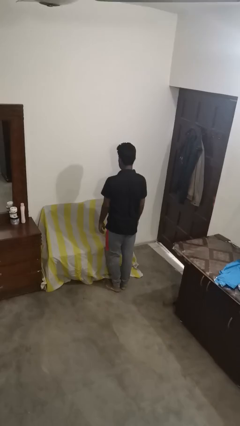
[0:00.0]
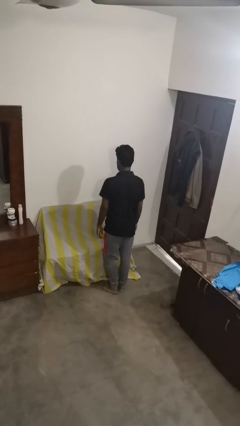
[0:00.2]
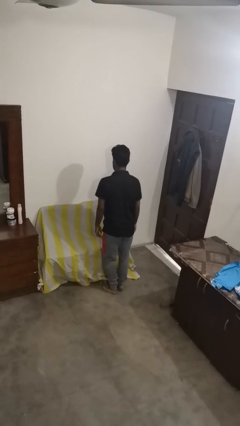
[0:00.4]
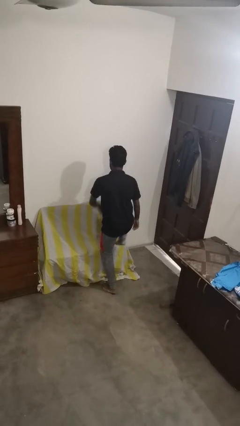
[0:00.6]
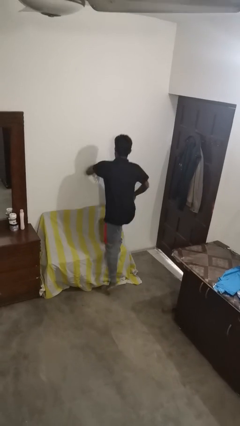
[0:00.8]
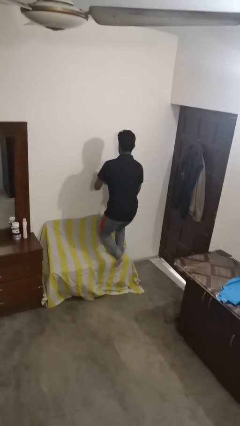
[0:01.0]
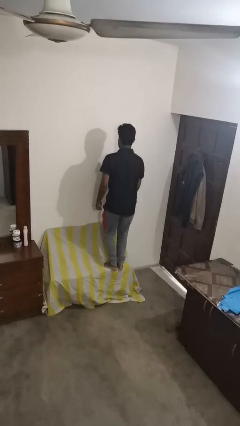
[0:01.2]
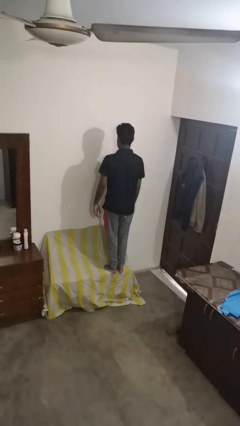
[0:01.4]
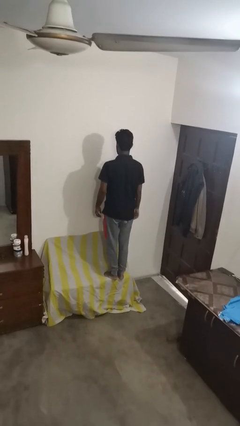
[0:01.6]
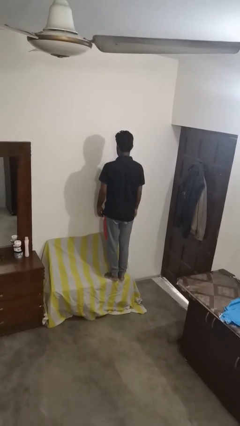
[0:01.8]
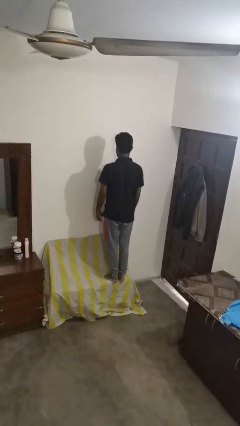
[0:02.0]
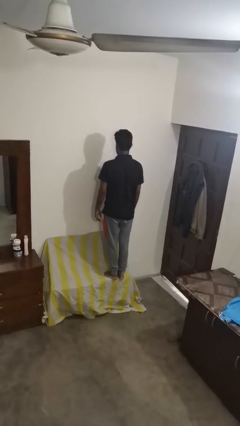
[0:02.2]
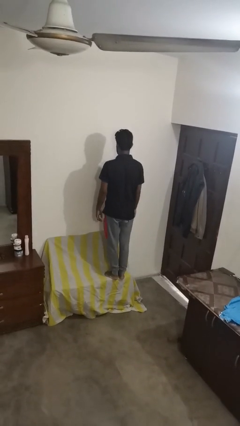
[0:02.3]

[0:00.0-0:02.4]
person jumps on couch

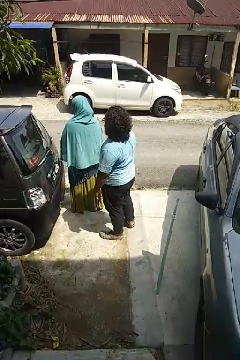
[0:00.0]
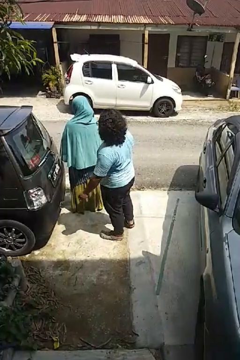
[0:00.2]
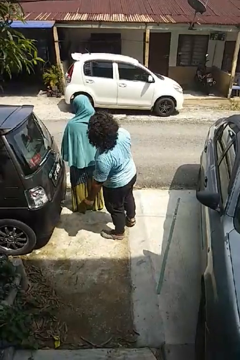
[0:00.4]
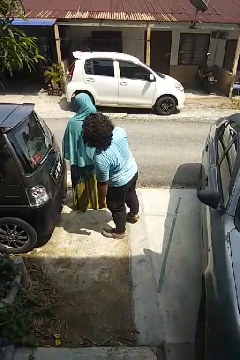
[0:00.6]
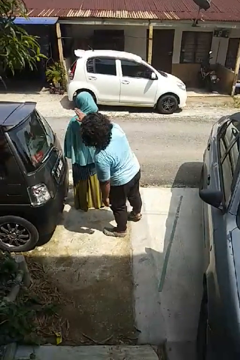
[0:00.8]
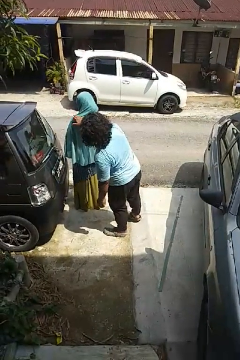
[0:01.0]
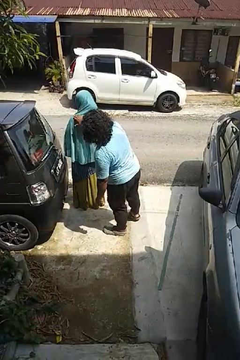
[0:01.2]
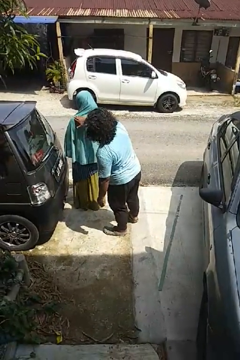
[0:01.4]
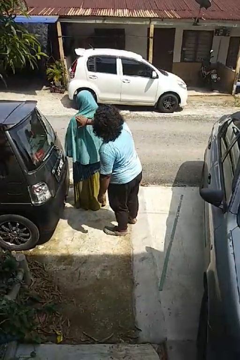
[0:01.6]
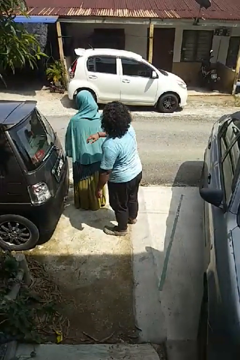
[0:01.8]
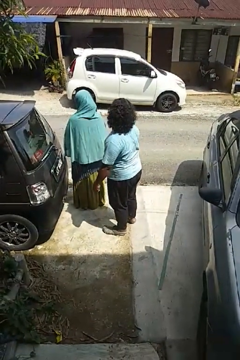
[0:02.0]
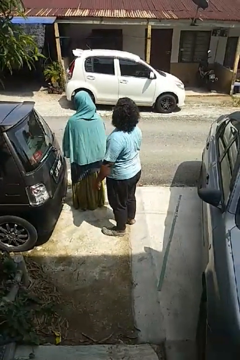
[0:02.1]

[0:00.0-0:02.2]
person touches back of person

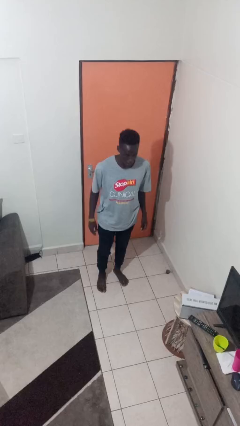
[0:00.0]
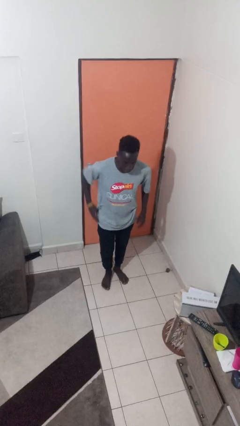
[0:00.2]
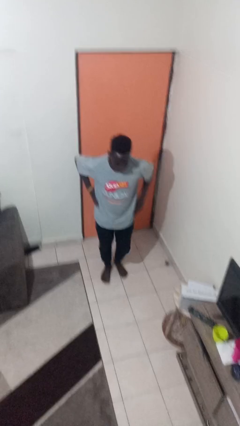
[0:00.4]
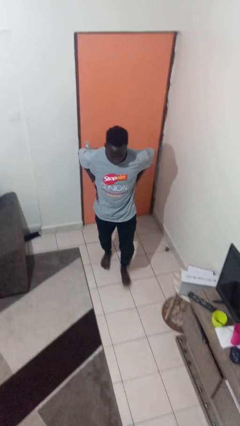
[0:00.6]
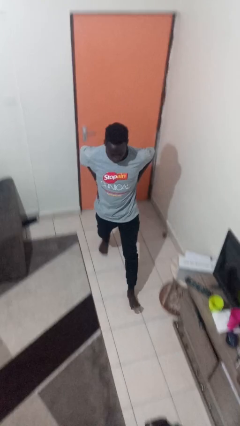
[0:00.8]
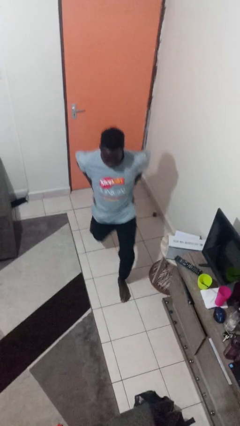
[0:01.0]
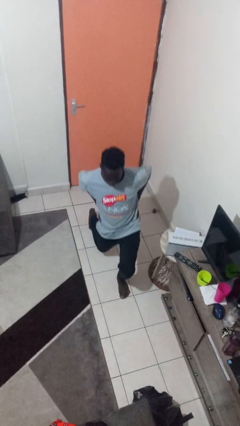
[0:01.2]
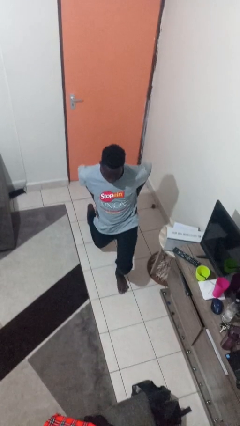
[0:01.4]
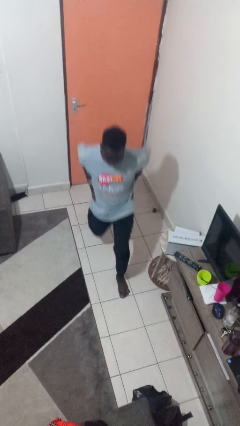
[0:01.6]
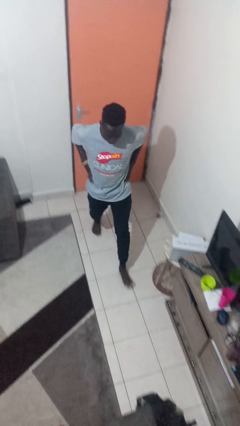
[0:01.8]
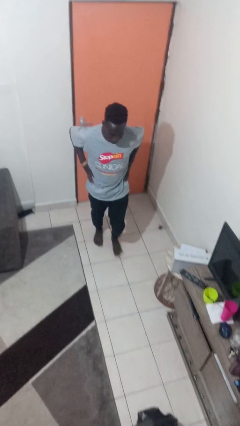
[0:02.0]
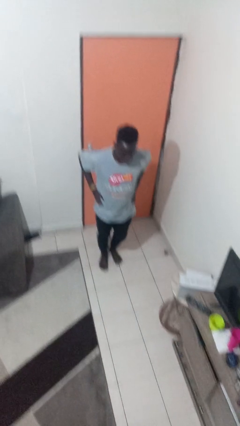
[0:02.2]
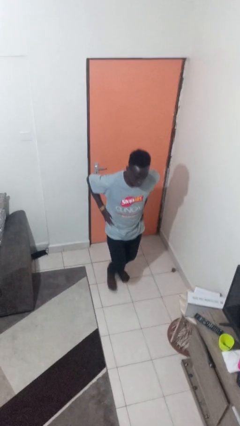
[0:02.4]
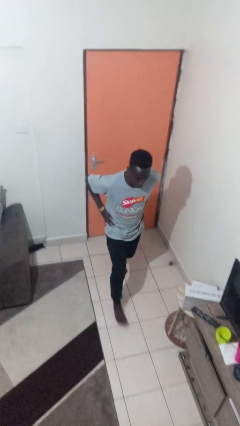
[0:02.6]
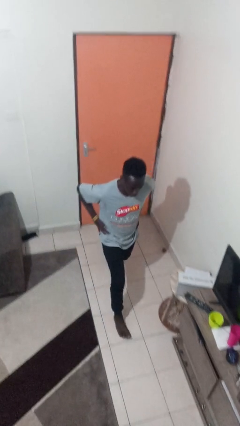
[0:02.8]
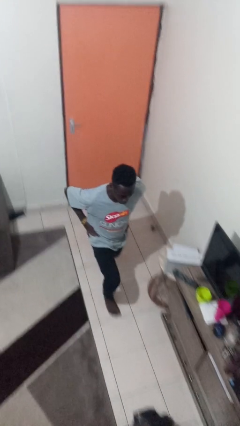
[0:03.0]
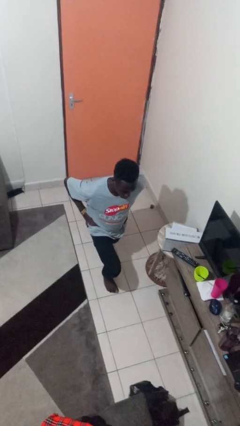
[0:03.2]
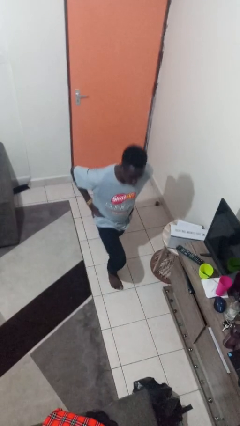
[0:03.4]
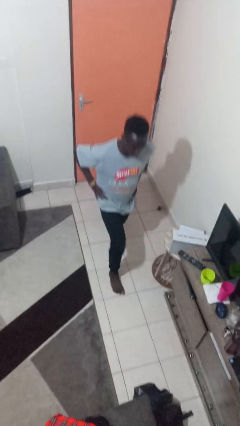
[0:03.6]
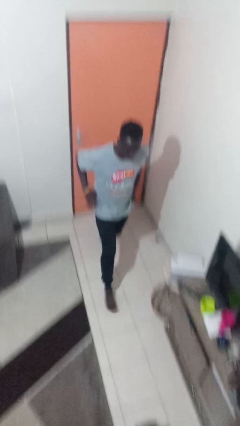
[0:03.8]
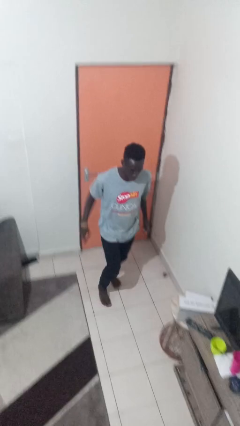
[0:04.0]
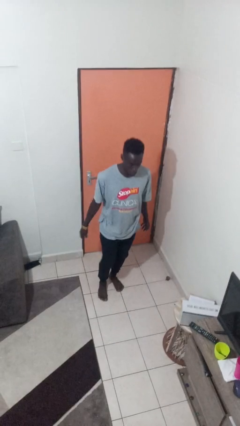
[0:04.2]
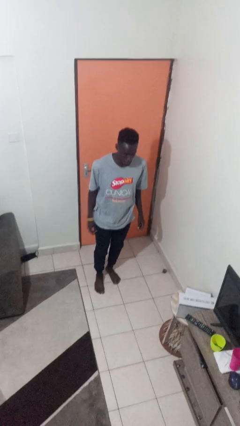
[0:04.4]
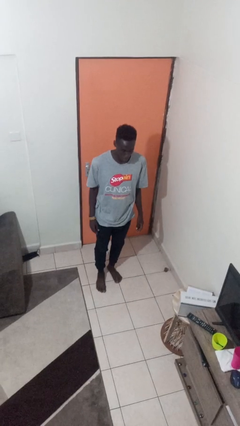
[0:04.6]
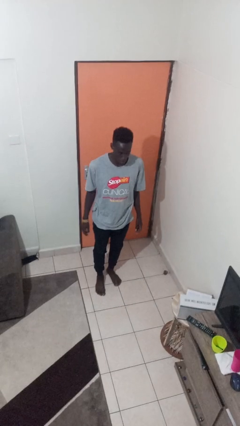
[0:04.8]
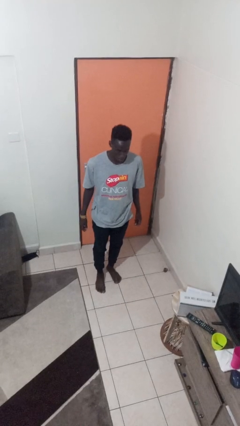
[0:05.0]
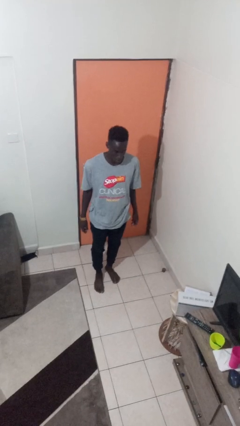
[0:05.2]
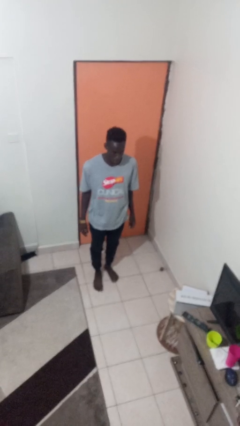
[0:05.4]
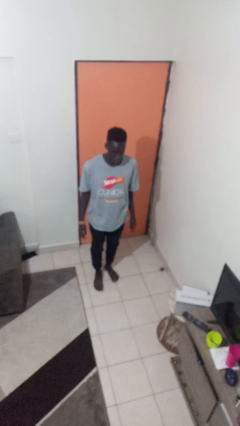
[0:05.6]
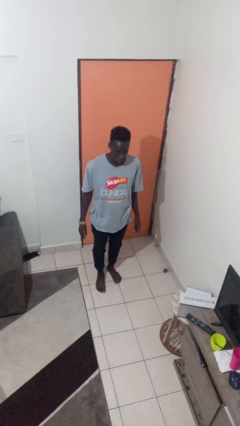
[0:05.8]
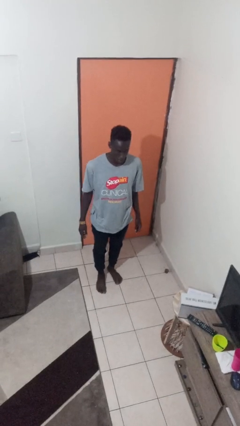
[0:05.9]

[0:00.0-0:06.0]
person exercises with lunges

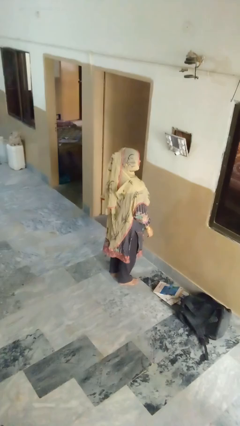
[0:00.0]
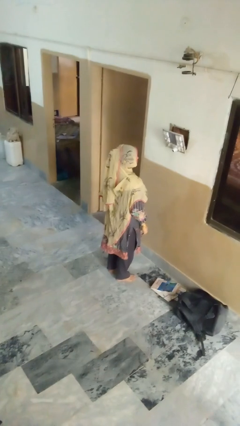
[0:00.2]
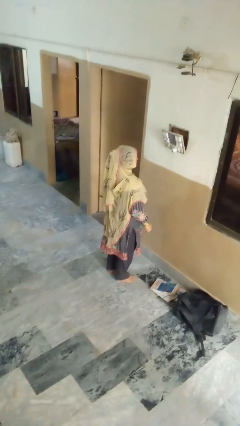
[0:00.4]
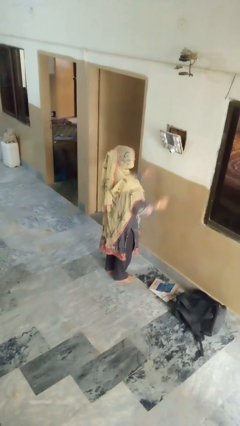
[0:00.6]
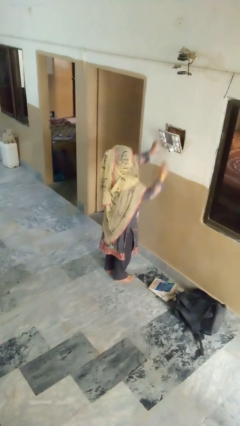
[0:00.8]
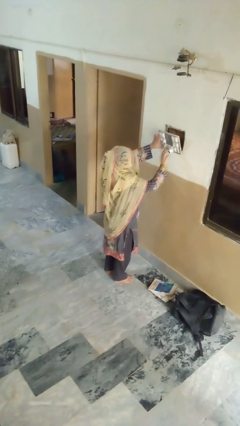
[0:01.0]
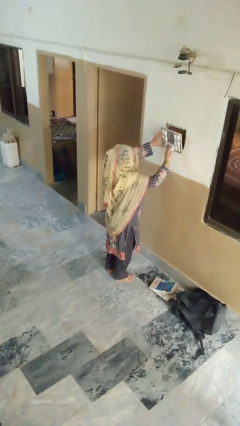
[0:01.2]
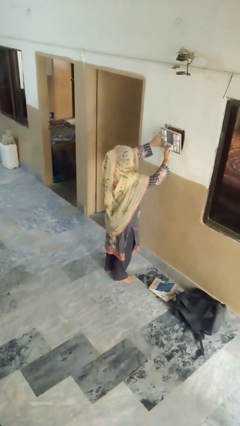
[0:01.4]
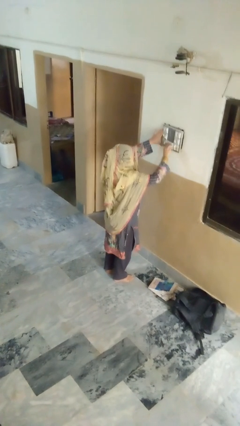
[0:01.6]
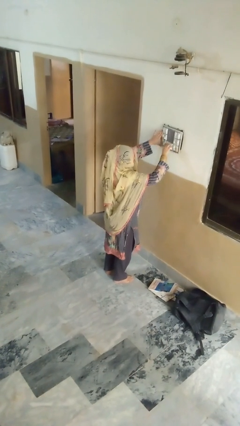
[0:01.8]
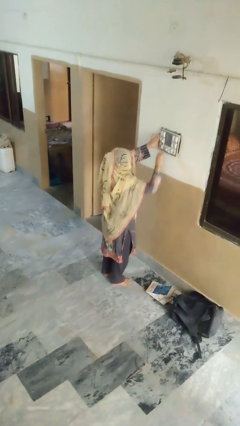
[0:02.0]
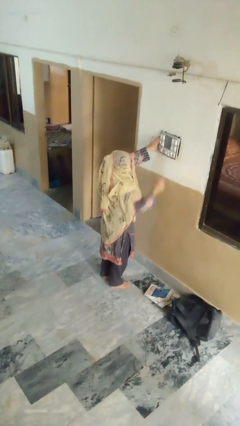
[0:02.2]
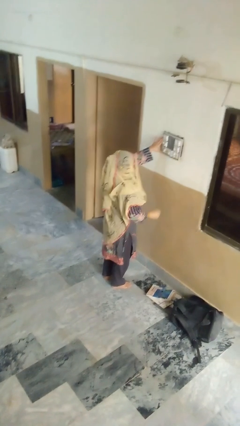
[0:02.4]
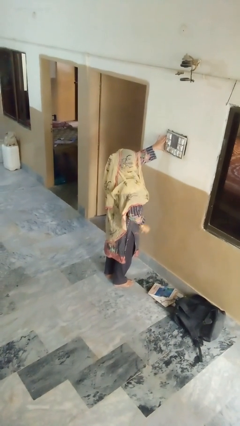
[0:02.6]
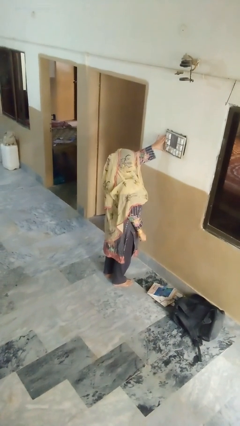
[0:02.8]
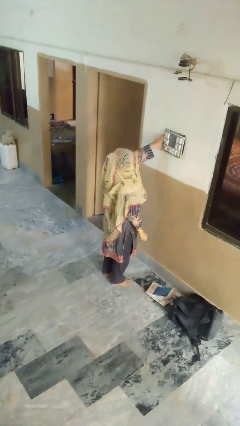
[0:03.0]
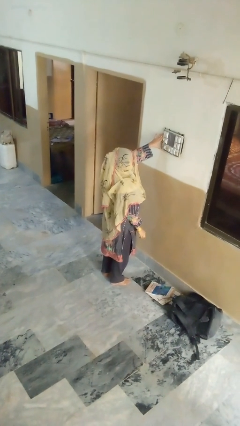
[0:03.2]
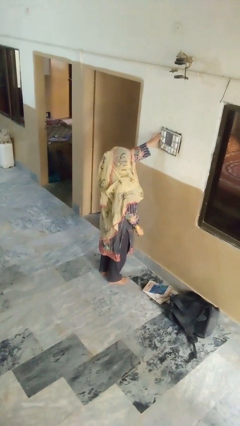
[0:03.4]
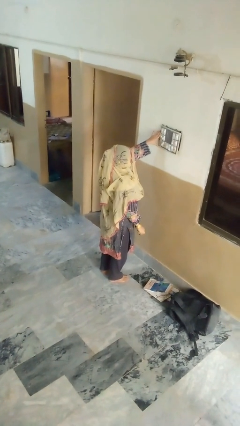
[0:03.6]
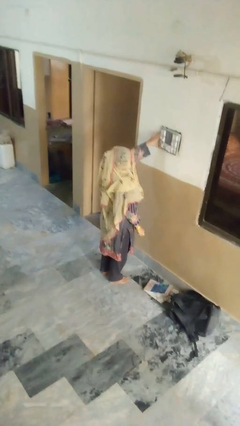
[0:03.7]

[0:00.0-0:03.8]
person unplugs from electrical socket

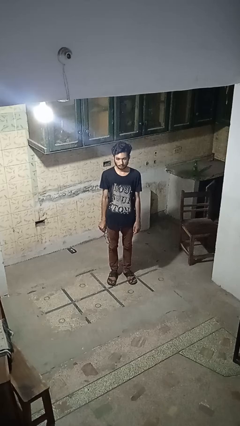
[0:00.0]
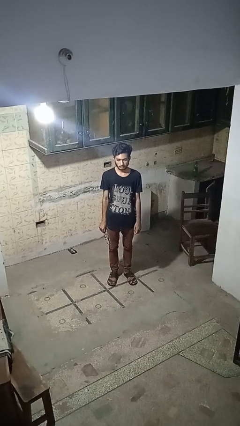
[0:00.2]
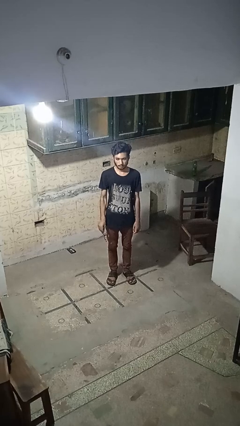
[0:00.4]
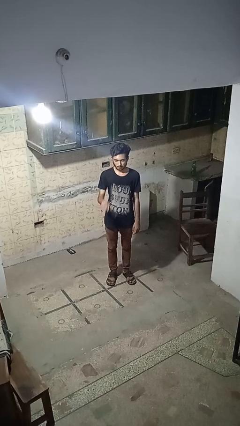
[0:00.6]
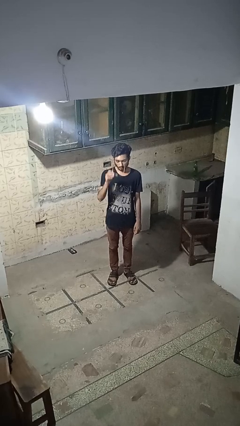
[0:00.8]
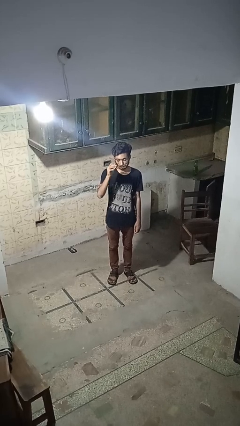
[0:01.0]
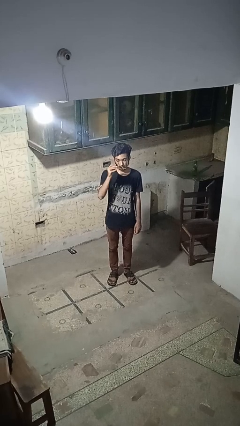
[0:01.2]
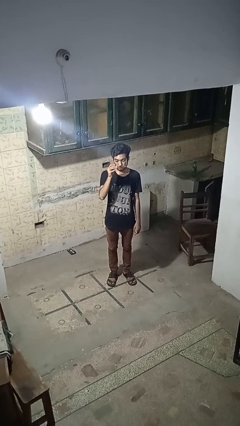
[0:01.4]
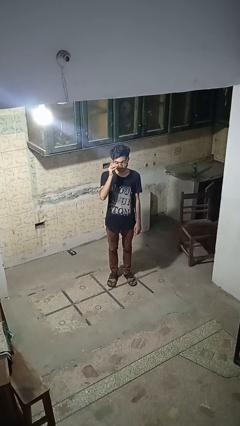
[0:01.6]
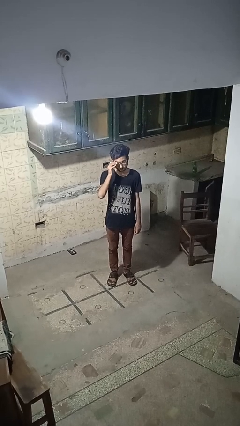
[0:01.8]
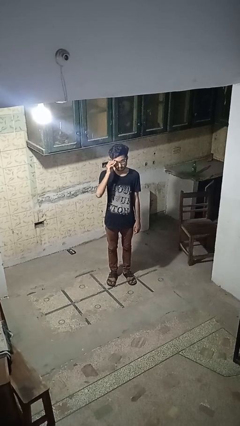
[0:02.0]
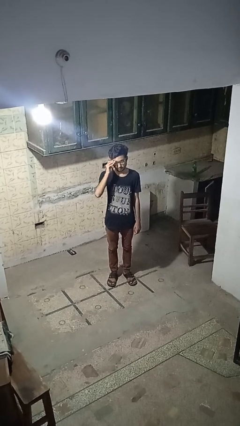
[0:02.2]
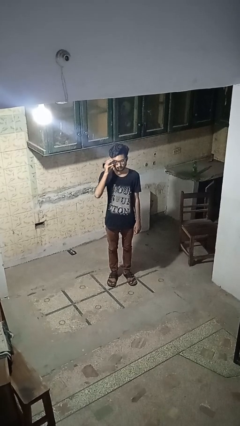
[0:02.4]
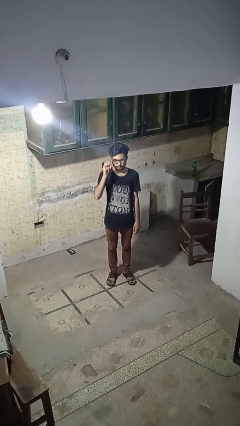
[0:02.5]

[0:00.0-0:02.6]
person puts on glasses

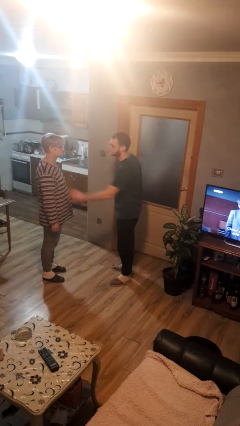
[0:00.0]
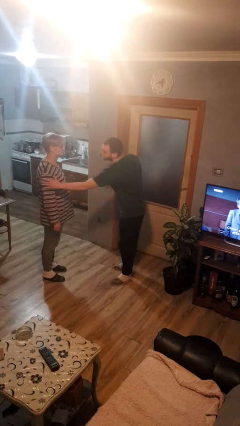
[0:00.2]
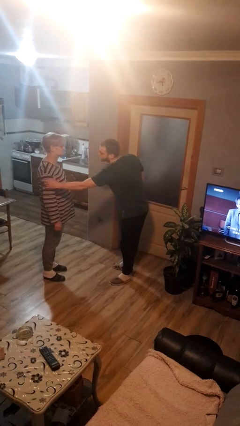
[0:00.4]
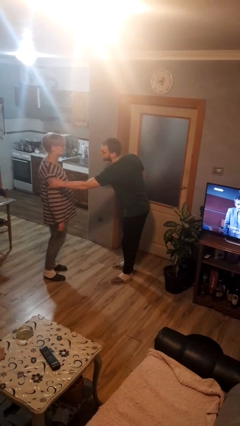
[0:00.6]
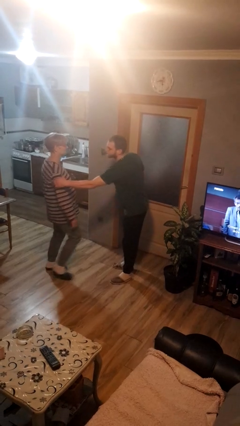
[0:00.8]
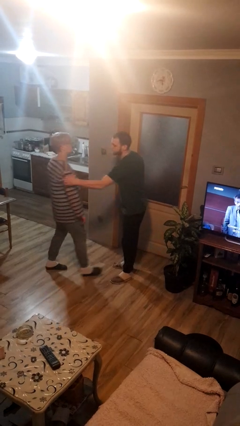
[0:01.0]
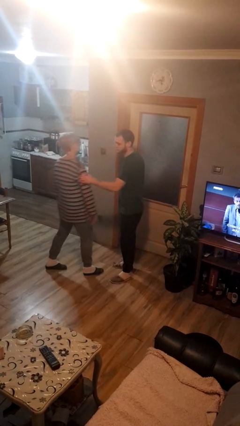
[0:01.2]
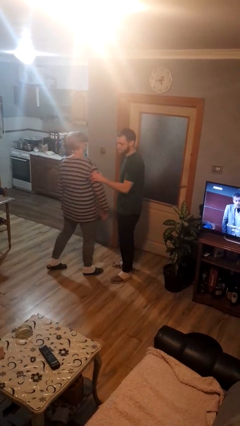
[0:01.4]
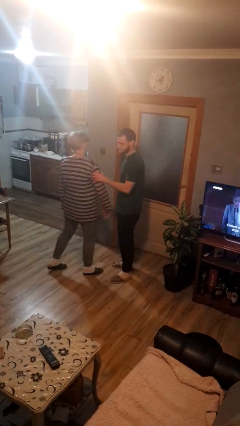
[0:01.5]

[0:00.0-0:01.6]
person grabs person by bicep
